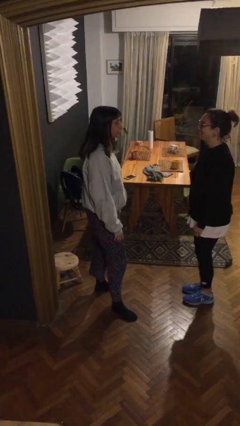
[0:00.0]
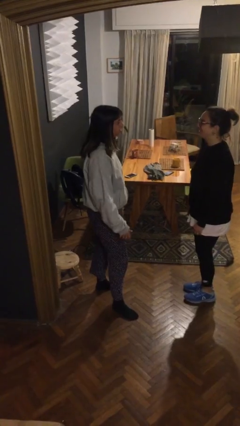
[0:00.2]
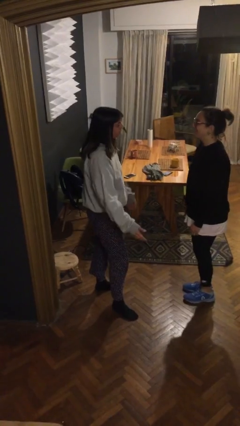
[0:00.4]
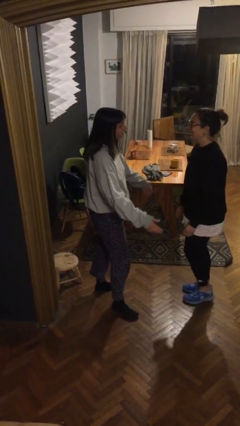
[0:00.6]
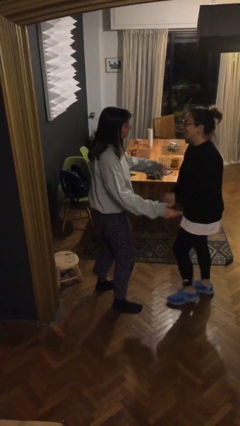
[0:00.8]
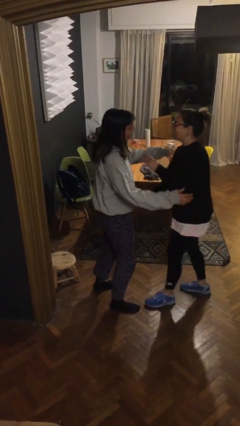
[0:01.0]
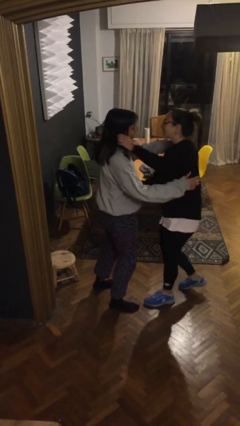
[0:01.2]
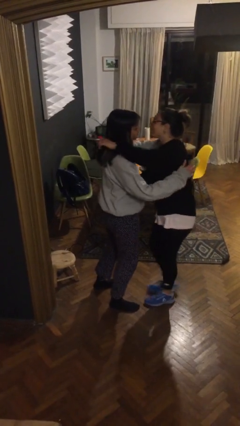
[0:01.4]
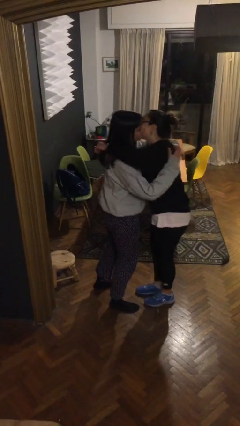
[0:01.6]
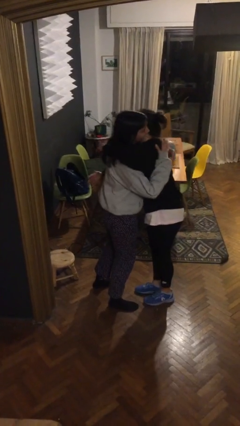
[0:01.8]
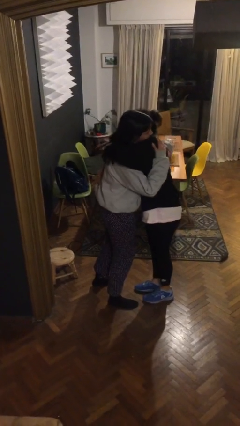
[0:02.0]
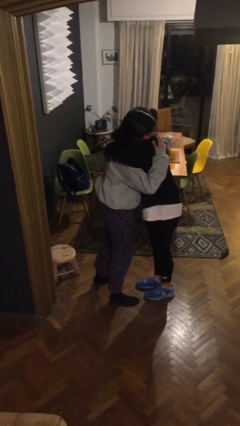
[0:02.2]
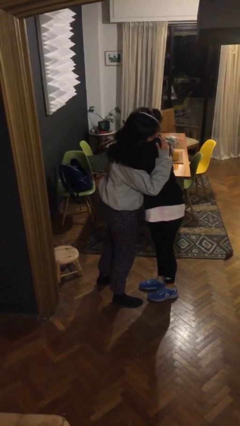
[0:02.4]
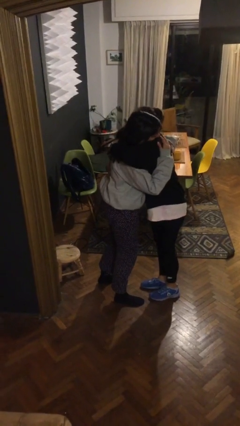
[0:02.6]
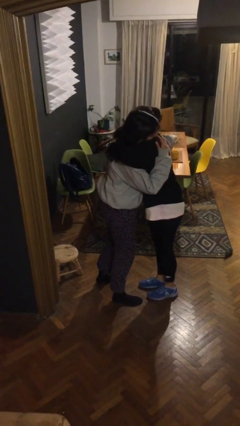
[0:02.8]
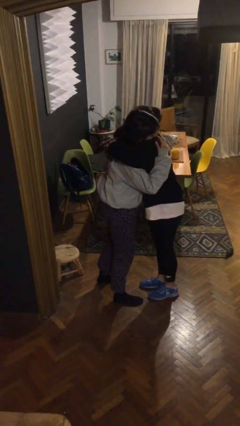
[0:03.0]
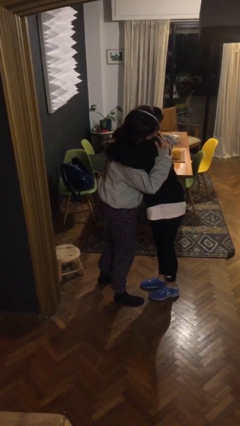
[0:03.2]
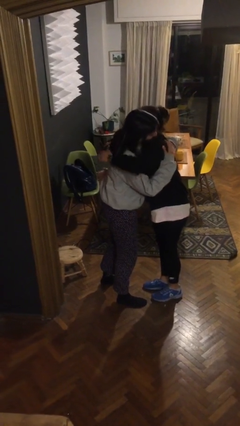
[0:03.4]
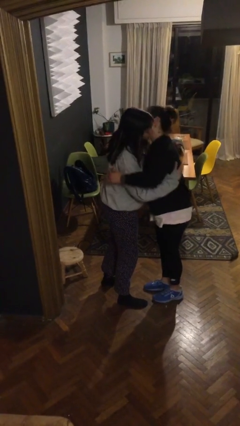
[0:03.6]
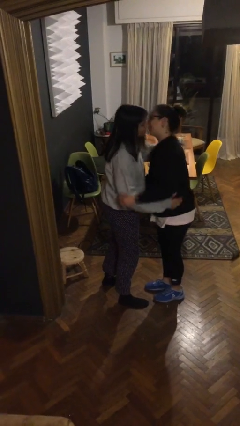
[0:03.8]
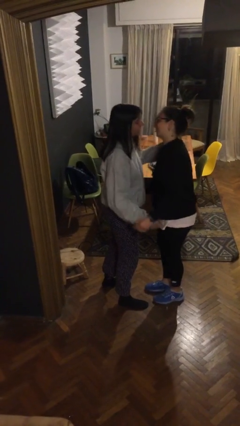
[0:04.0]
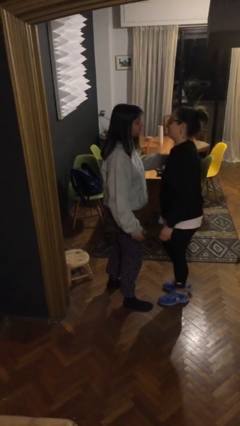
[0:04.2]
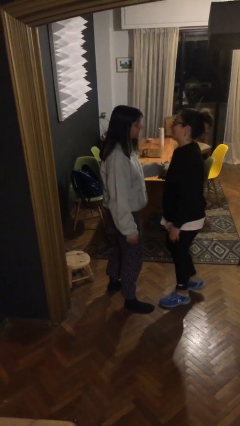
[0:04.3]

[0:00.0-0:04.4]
person embraces person

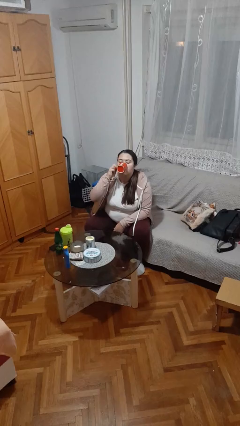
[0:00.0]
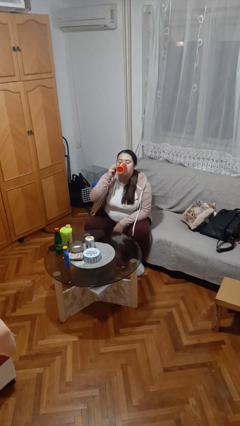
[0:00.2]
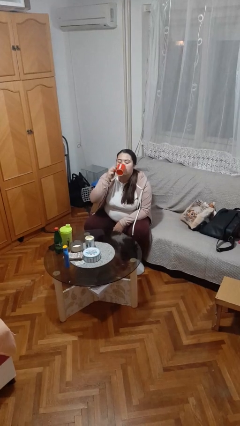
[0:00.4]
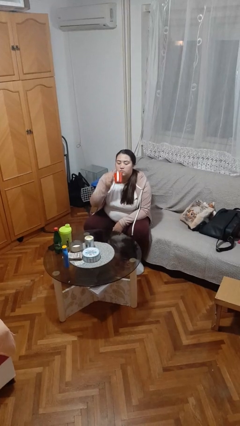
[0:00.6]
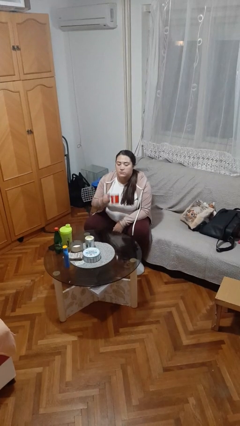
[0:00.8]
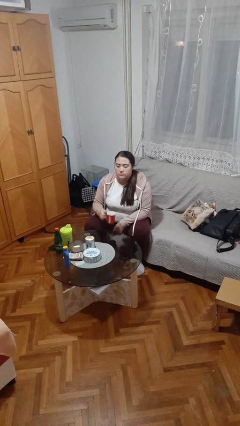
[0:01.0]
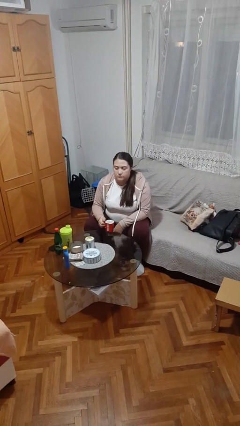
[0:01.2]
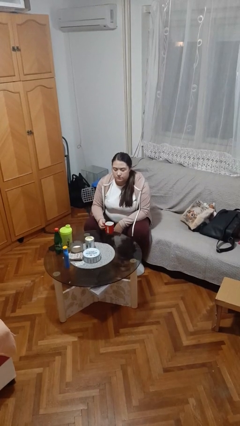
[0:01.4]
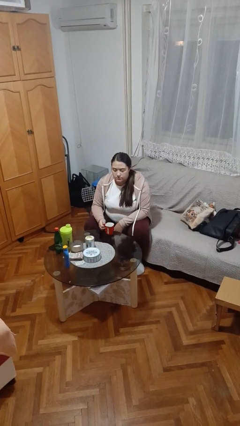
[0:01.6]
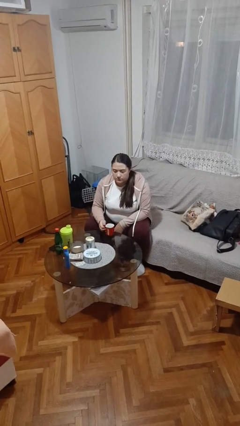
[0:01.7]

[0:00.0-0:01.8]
person puts down object on table

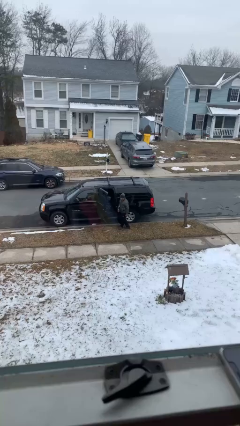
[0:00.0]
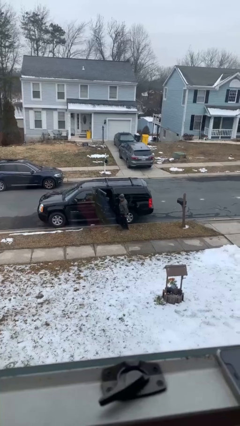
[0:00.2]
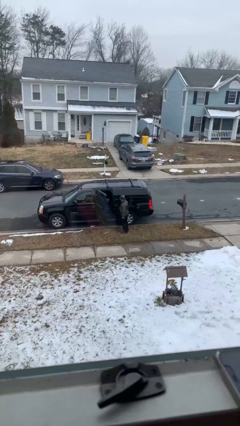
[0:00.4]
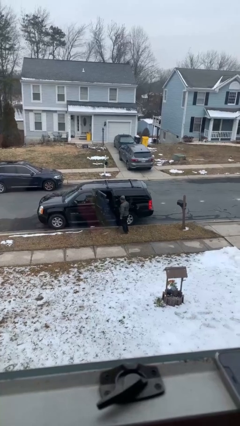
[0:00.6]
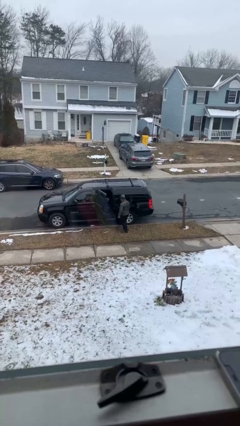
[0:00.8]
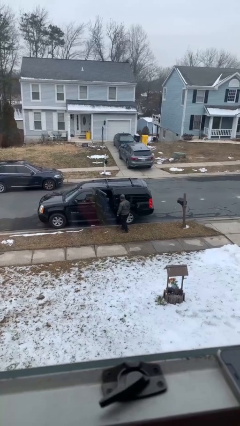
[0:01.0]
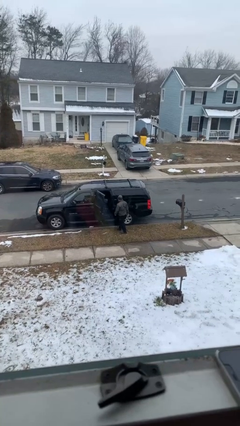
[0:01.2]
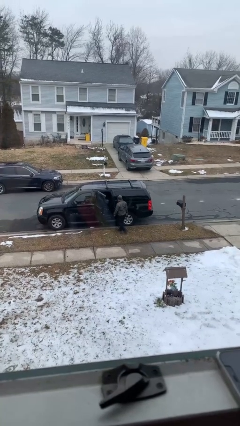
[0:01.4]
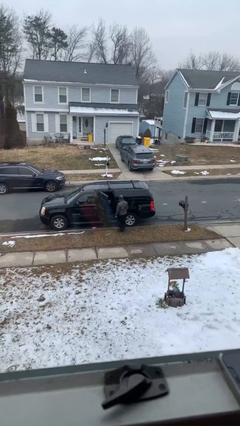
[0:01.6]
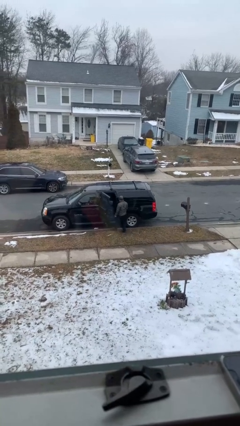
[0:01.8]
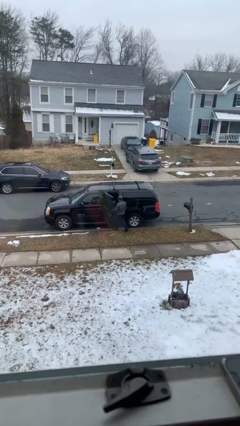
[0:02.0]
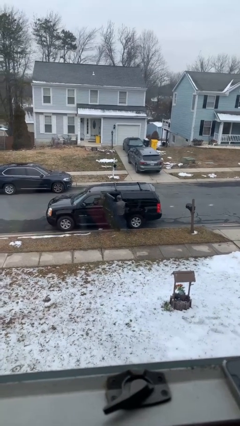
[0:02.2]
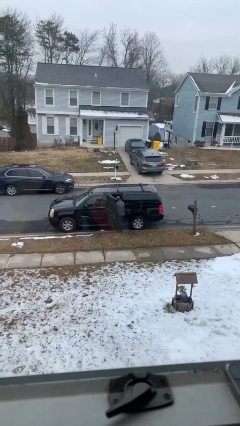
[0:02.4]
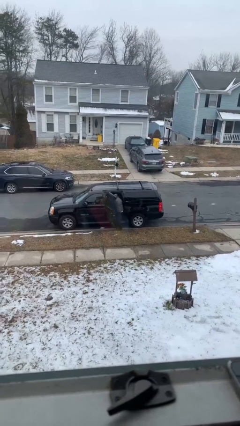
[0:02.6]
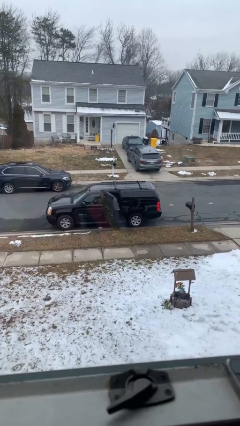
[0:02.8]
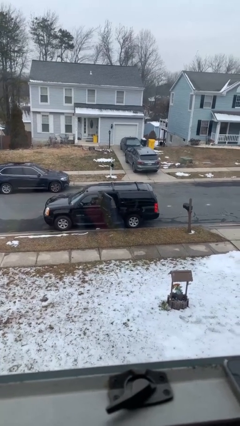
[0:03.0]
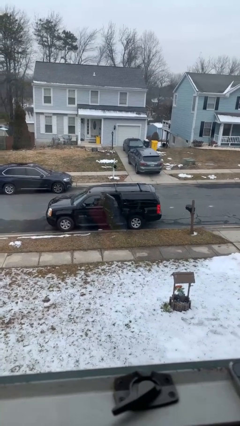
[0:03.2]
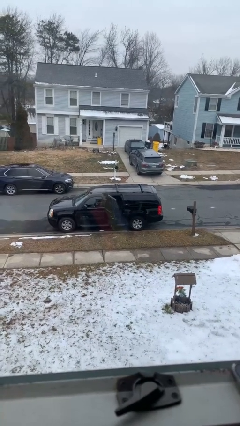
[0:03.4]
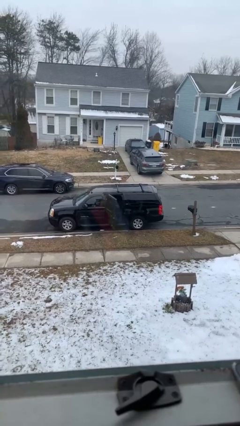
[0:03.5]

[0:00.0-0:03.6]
person enters car

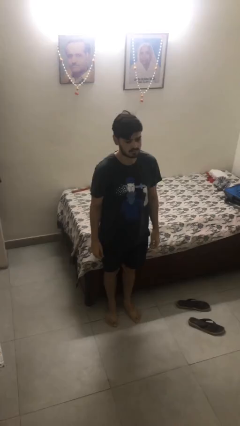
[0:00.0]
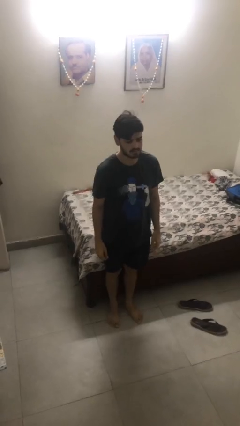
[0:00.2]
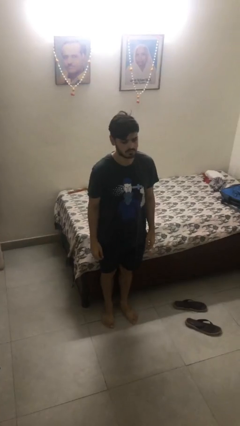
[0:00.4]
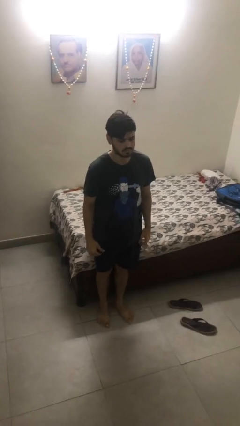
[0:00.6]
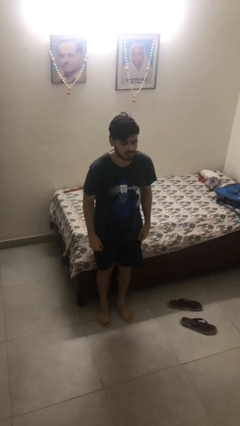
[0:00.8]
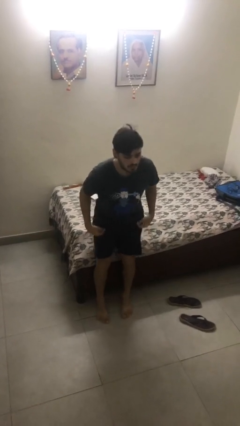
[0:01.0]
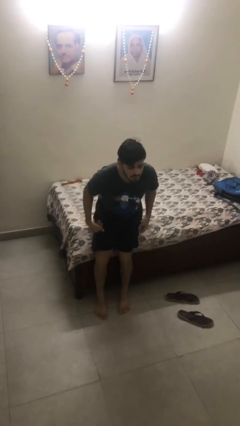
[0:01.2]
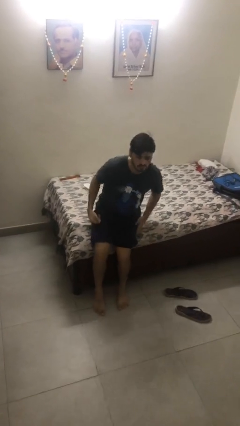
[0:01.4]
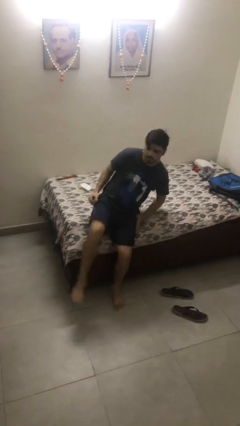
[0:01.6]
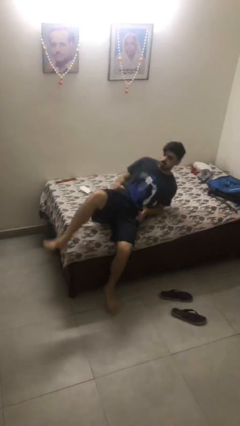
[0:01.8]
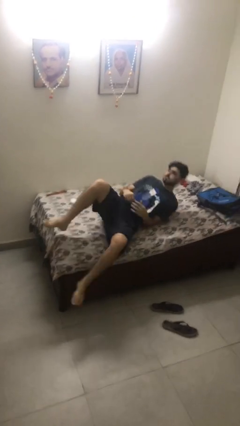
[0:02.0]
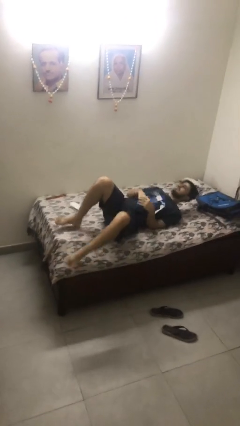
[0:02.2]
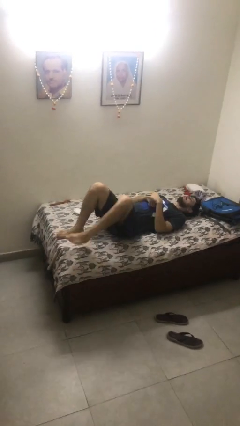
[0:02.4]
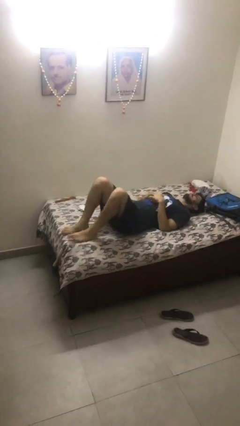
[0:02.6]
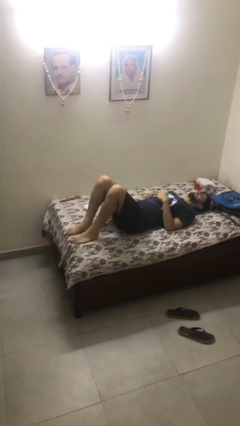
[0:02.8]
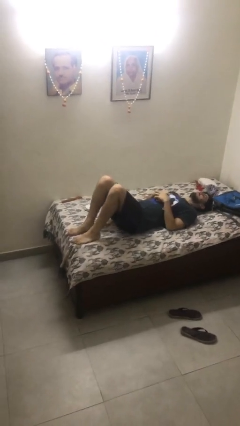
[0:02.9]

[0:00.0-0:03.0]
person lies down on bed

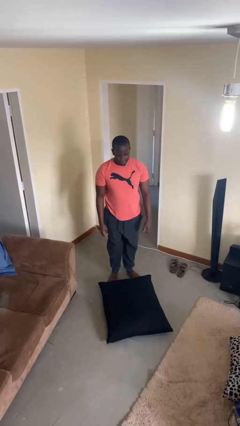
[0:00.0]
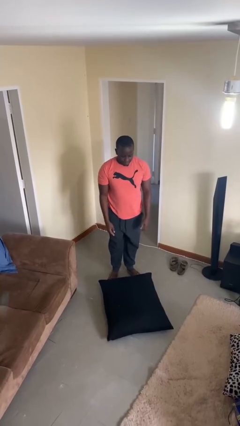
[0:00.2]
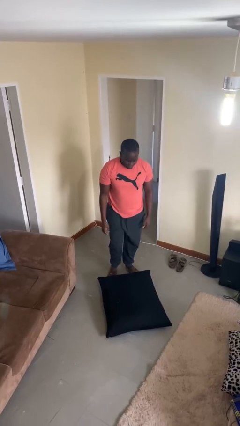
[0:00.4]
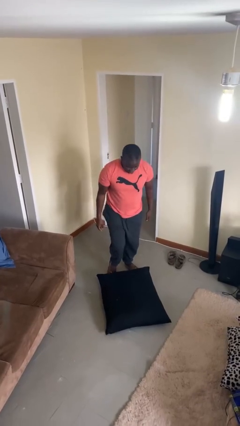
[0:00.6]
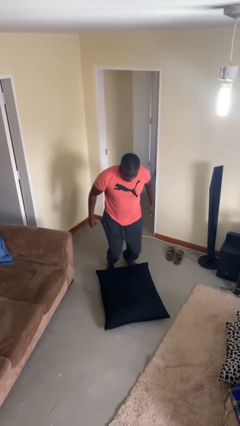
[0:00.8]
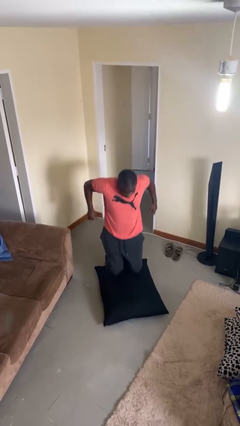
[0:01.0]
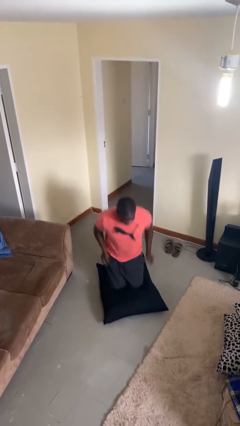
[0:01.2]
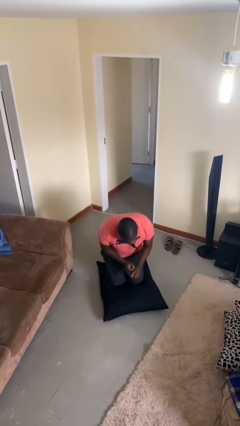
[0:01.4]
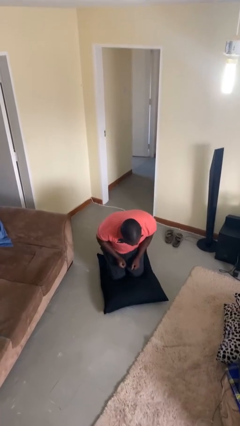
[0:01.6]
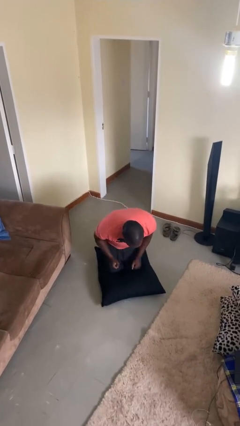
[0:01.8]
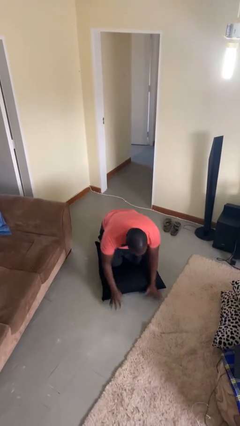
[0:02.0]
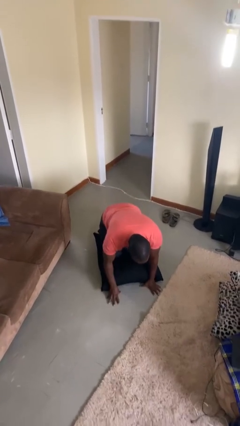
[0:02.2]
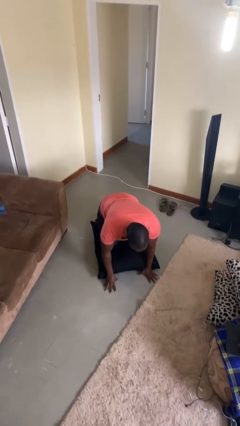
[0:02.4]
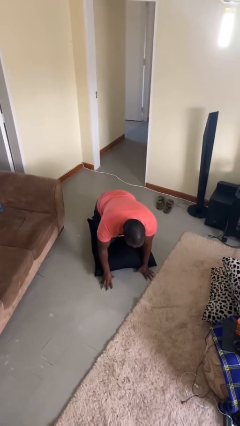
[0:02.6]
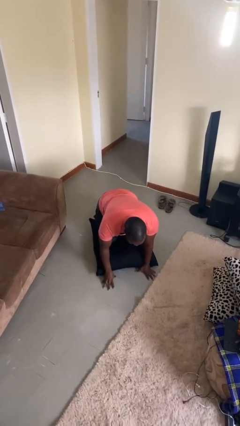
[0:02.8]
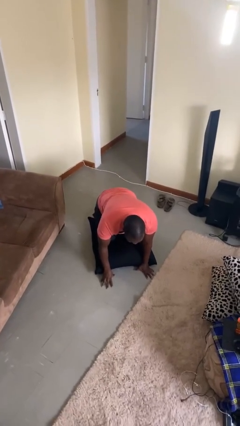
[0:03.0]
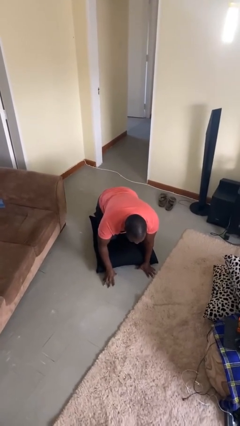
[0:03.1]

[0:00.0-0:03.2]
person trips on object on floor

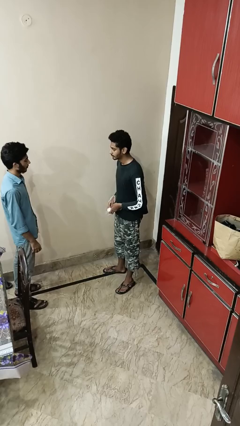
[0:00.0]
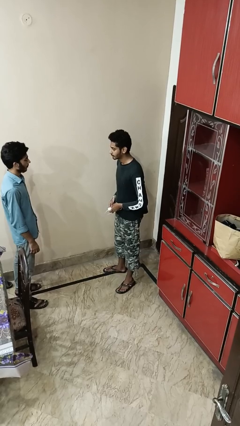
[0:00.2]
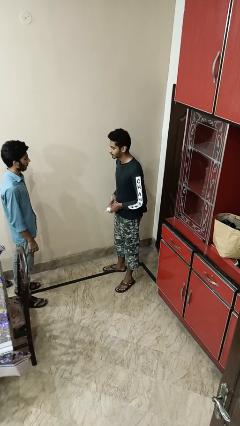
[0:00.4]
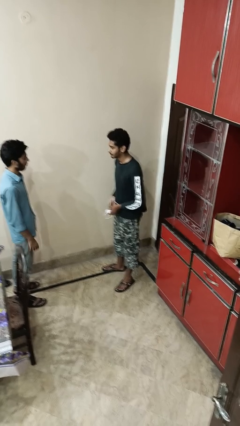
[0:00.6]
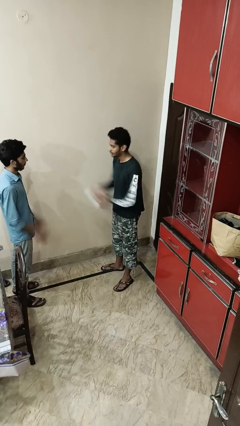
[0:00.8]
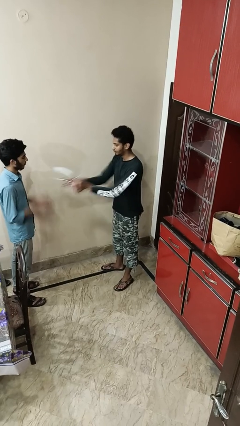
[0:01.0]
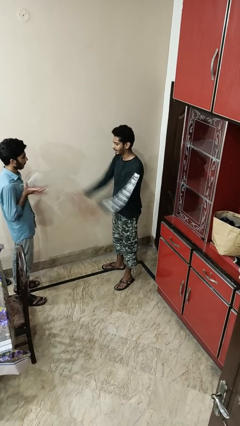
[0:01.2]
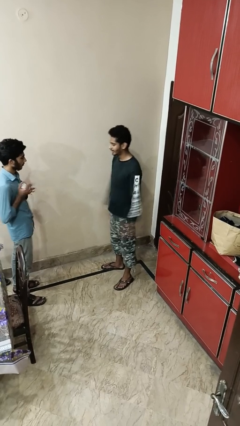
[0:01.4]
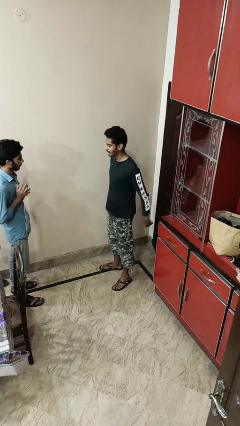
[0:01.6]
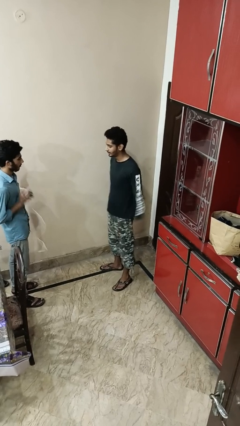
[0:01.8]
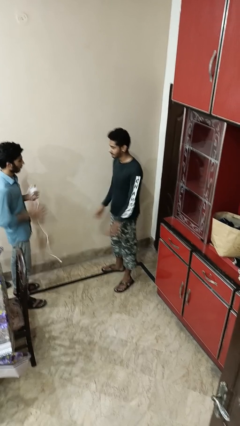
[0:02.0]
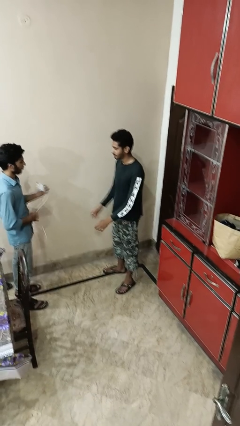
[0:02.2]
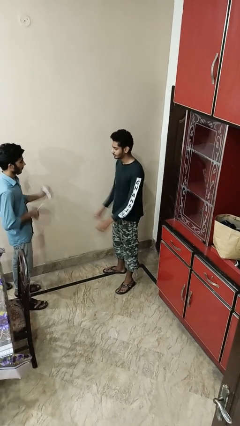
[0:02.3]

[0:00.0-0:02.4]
person throws object to person
